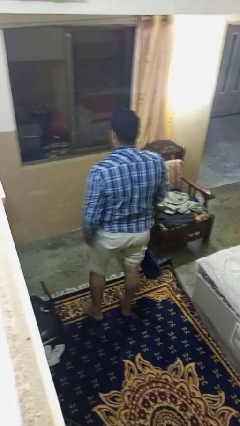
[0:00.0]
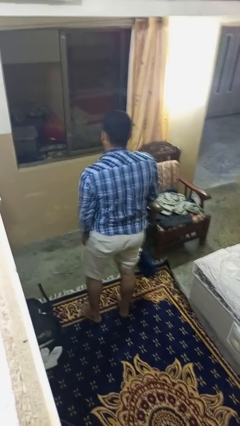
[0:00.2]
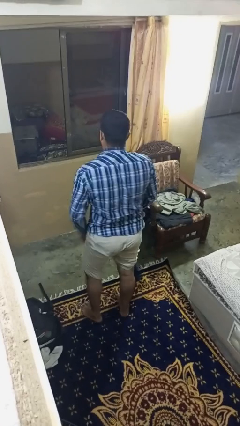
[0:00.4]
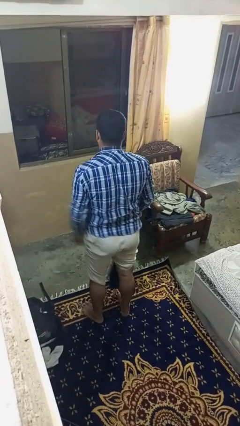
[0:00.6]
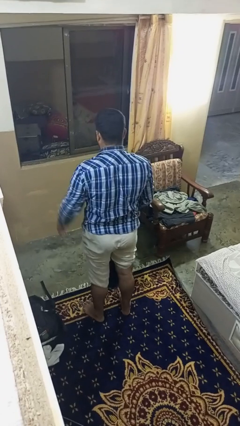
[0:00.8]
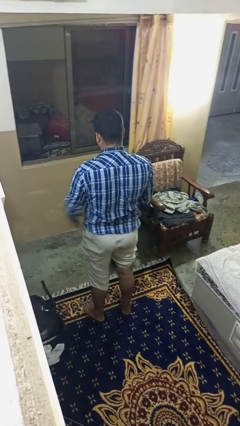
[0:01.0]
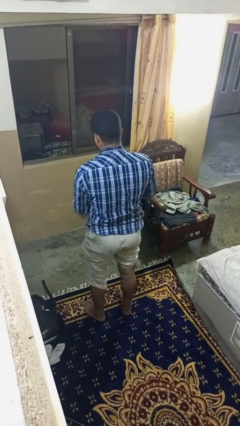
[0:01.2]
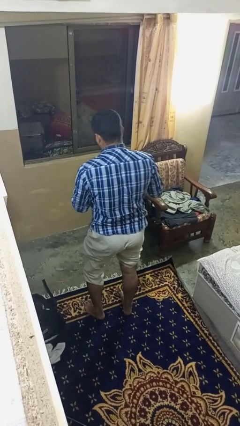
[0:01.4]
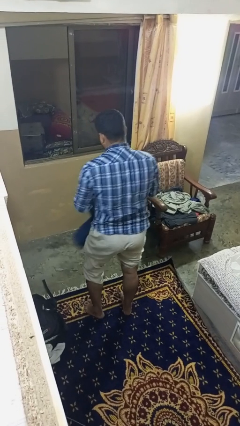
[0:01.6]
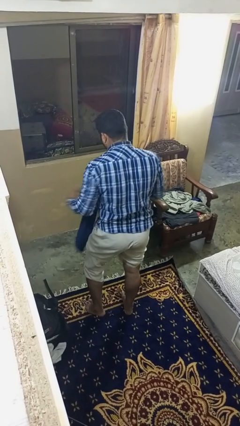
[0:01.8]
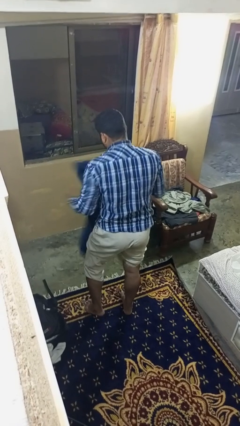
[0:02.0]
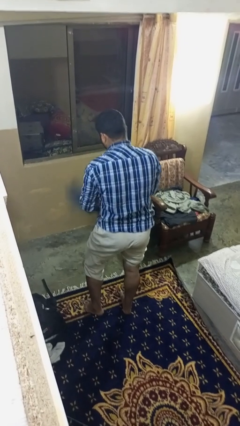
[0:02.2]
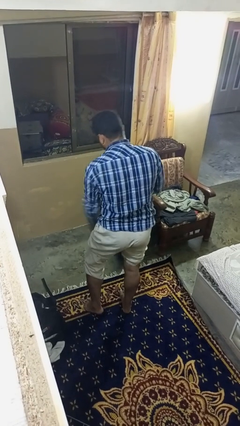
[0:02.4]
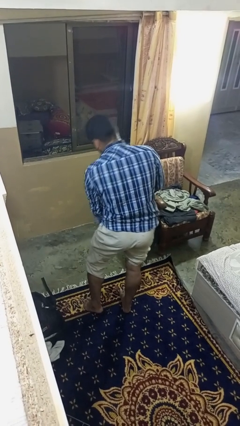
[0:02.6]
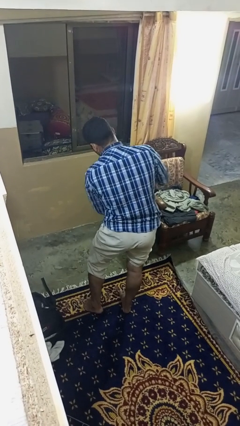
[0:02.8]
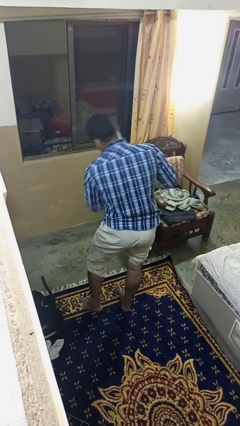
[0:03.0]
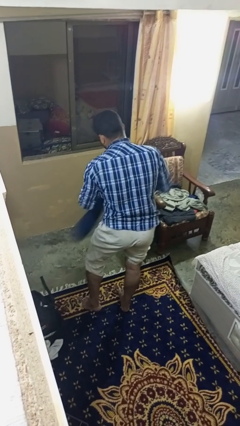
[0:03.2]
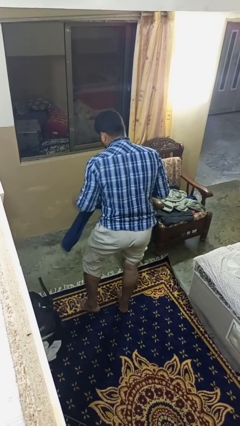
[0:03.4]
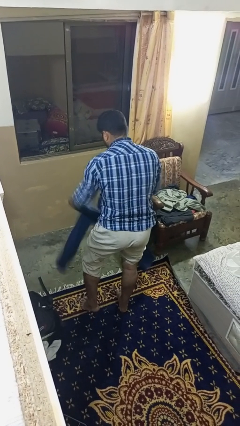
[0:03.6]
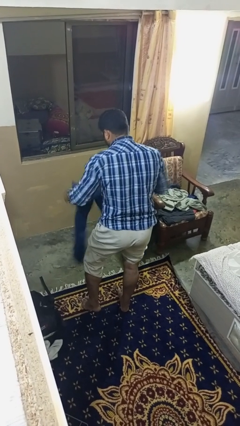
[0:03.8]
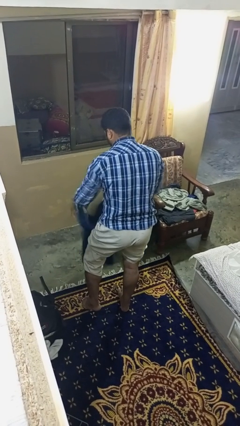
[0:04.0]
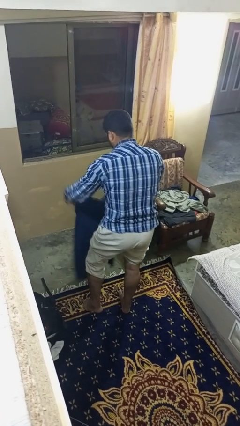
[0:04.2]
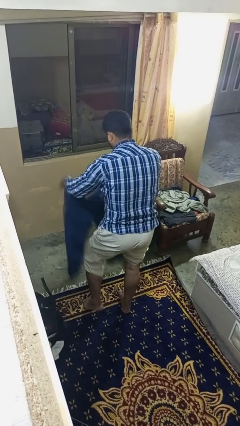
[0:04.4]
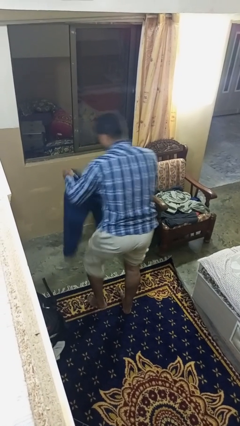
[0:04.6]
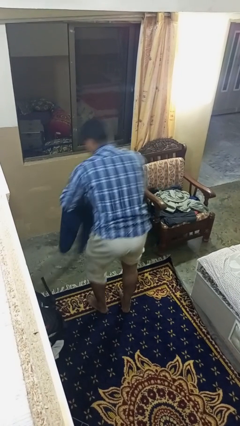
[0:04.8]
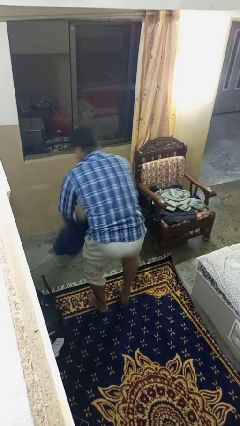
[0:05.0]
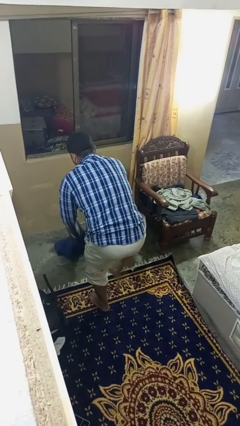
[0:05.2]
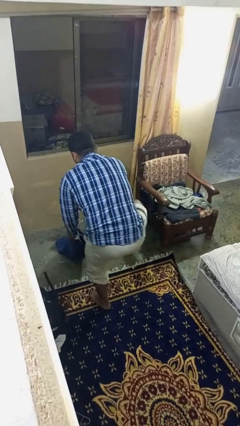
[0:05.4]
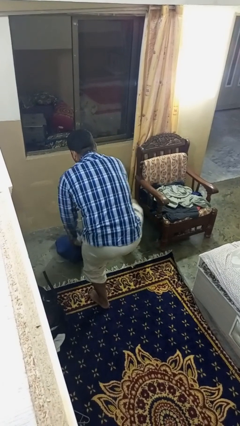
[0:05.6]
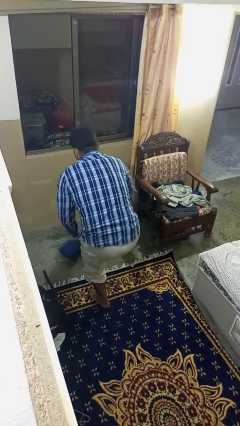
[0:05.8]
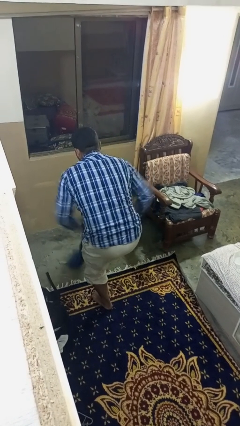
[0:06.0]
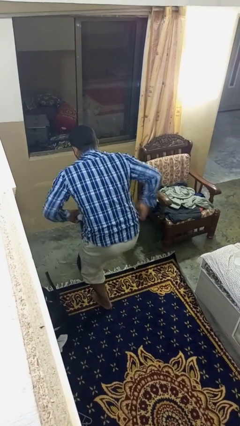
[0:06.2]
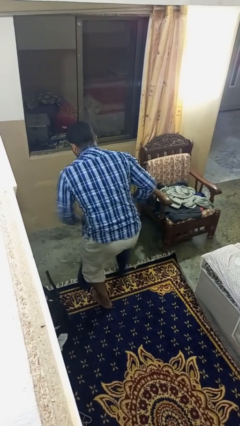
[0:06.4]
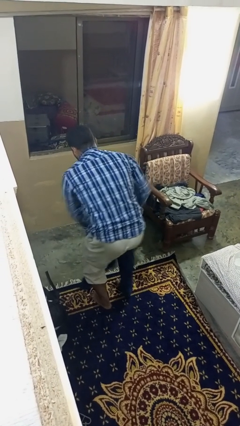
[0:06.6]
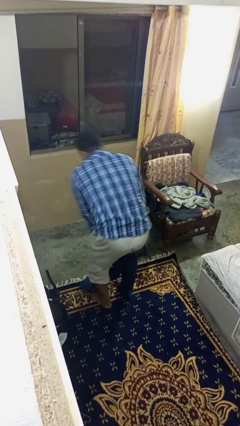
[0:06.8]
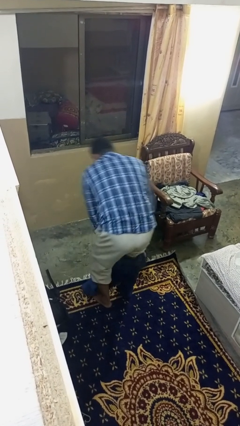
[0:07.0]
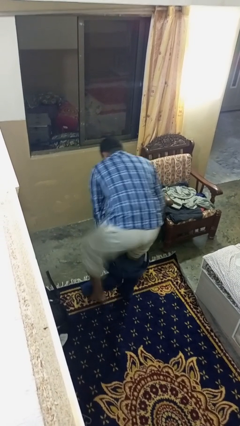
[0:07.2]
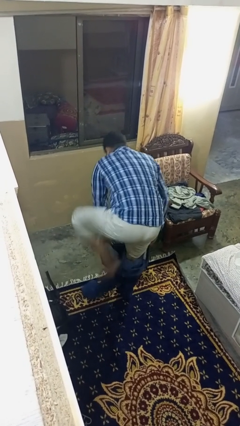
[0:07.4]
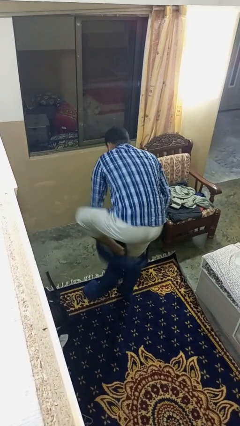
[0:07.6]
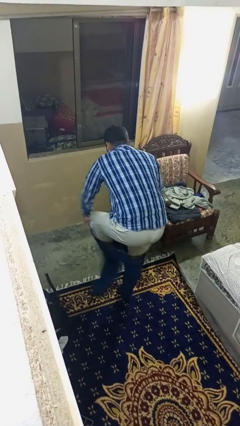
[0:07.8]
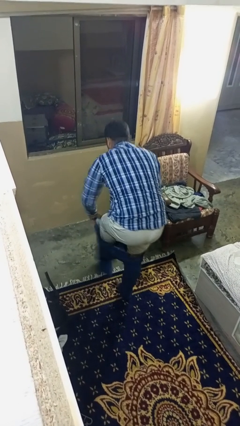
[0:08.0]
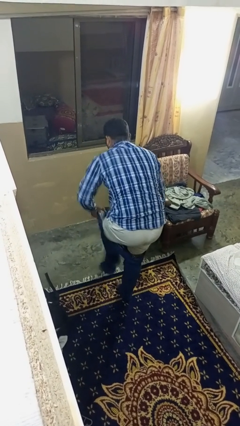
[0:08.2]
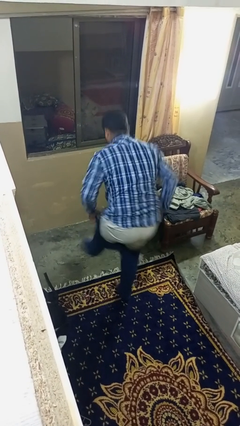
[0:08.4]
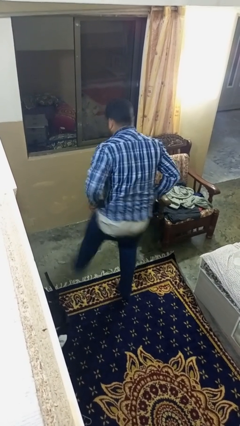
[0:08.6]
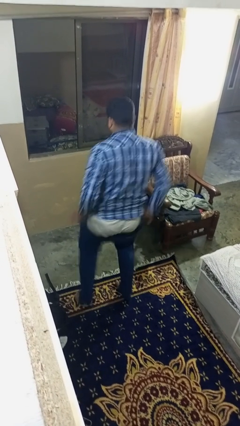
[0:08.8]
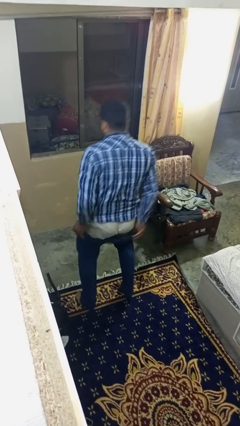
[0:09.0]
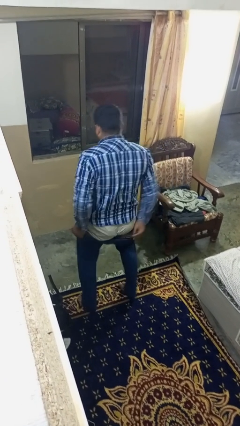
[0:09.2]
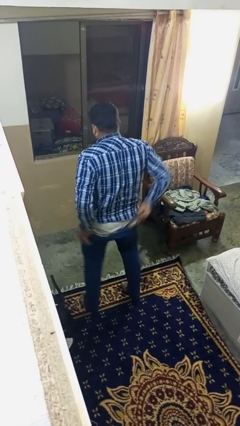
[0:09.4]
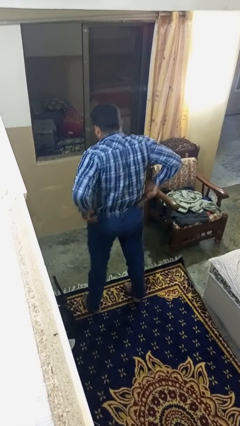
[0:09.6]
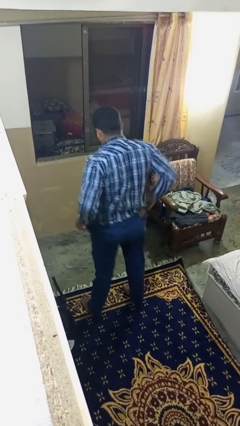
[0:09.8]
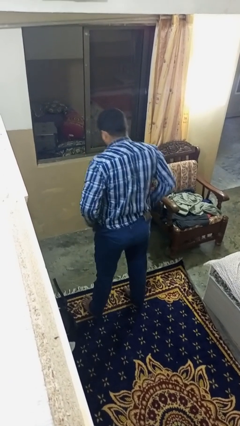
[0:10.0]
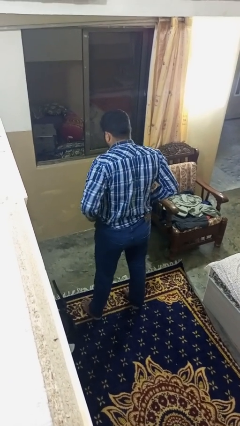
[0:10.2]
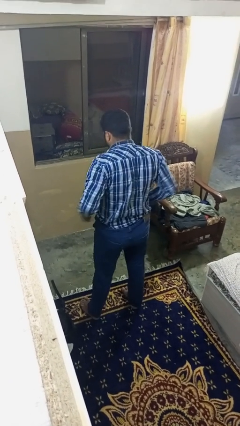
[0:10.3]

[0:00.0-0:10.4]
person puts on pants

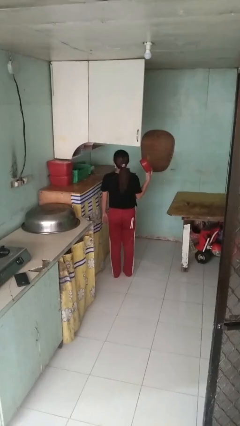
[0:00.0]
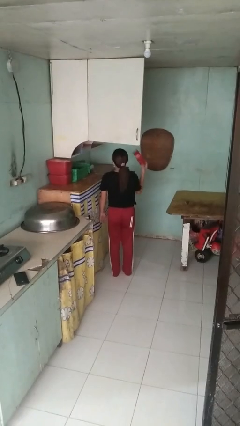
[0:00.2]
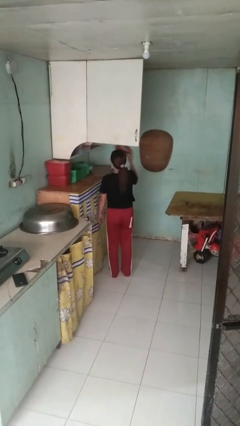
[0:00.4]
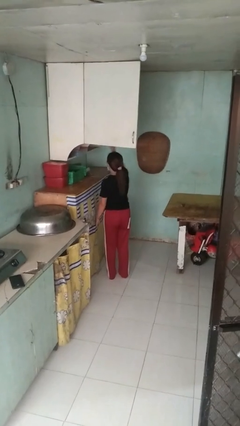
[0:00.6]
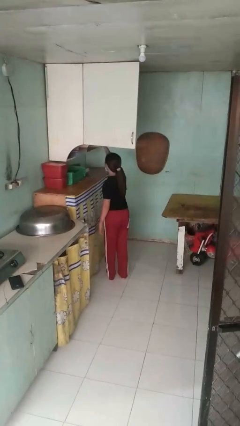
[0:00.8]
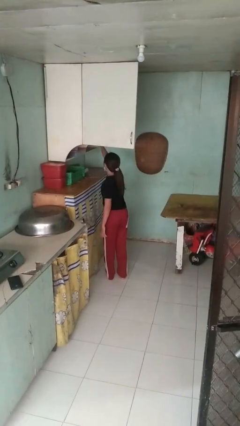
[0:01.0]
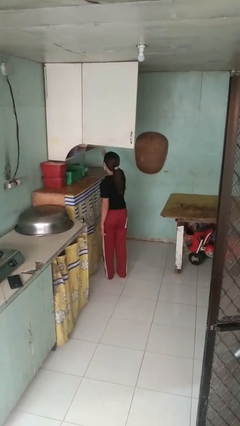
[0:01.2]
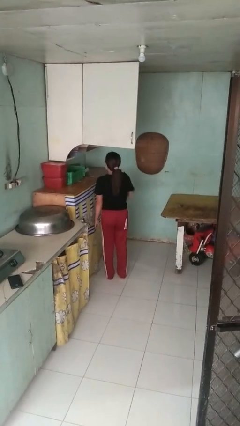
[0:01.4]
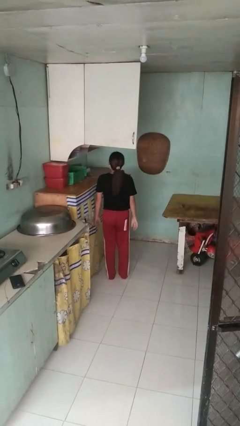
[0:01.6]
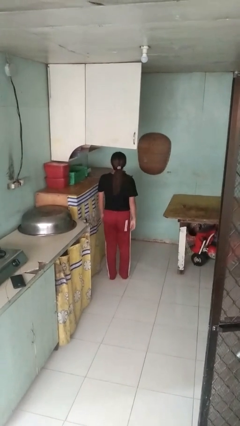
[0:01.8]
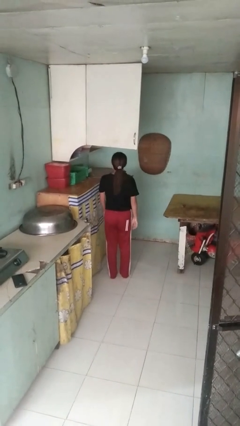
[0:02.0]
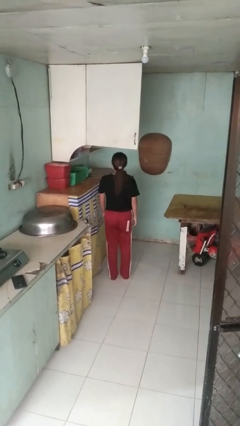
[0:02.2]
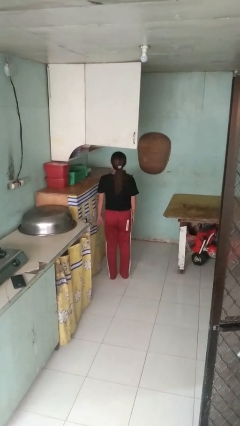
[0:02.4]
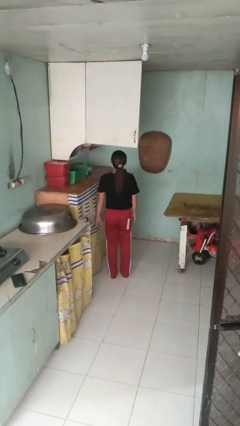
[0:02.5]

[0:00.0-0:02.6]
person puts object in cabinet

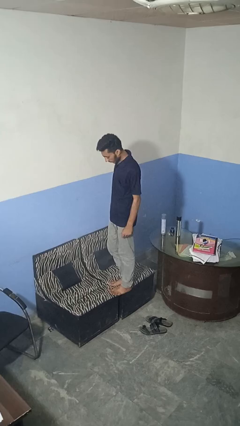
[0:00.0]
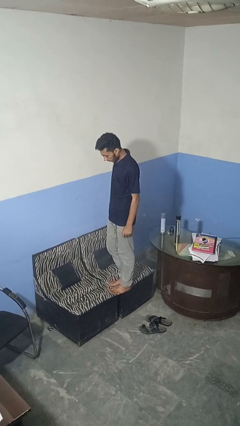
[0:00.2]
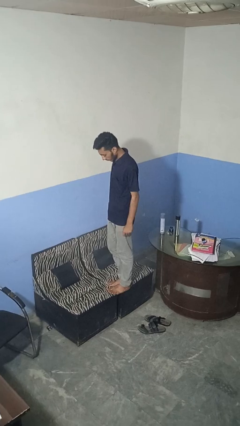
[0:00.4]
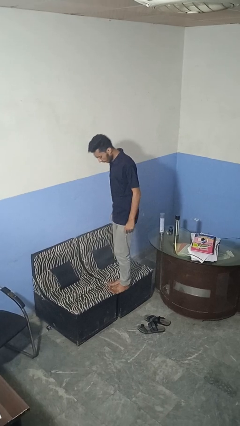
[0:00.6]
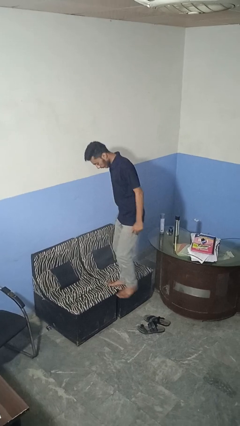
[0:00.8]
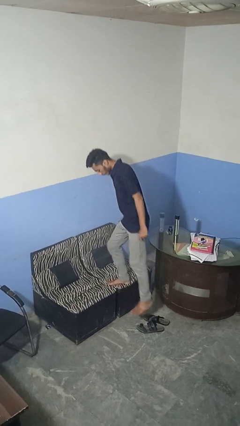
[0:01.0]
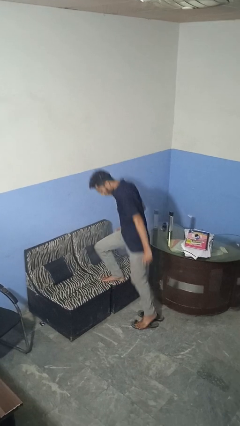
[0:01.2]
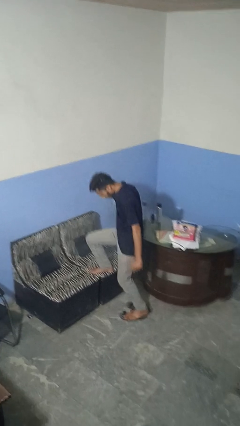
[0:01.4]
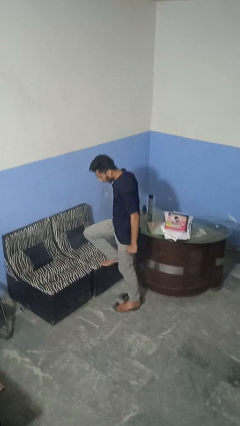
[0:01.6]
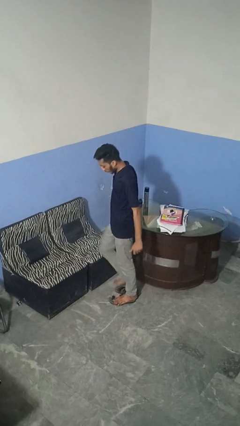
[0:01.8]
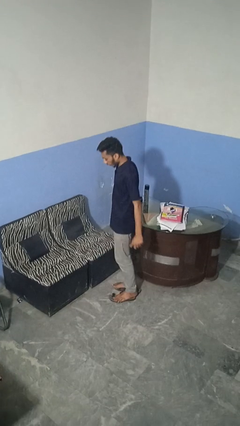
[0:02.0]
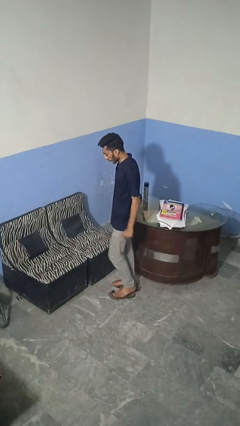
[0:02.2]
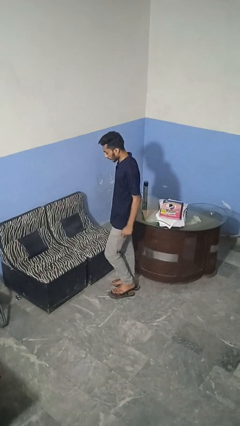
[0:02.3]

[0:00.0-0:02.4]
person climbs off couch

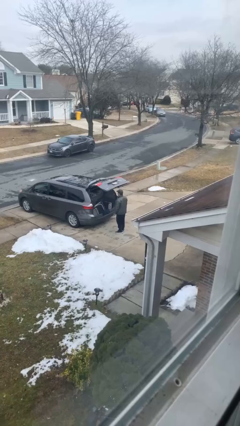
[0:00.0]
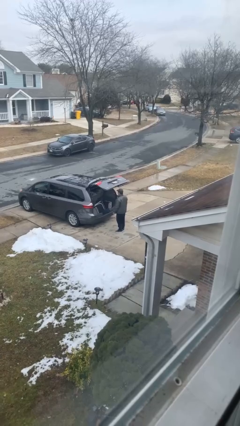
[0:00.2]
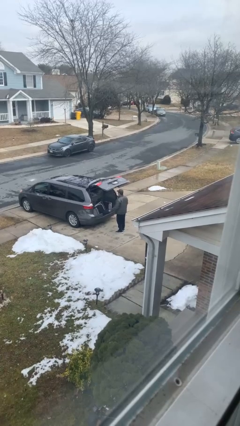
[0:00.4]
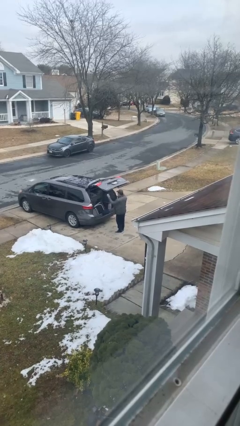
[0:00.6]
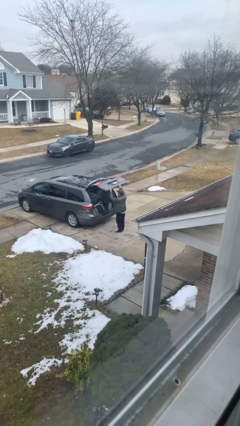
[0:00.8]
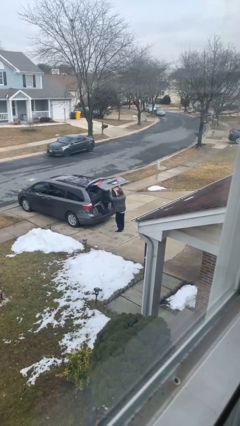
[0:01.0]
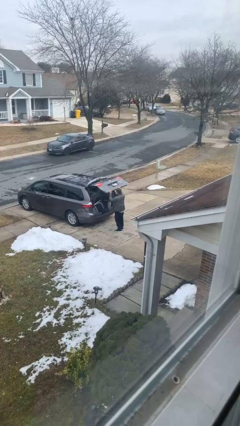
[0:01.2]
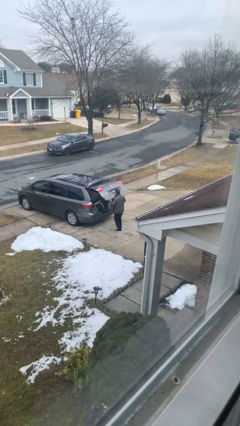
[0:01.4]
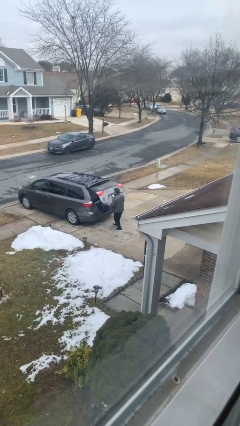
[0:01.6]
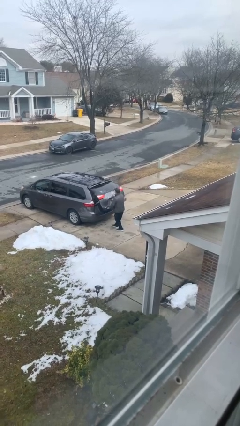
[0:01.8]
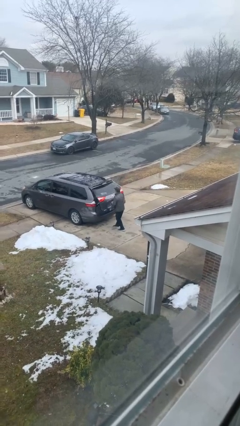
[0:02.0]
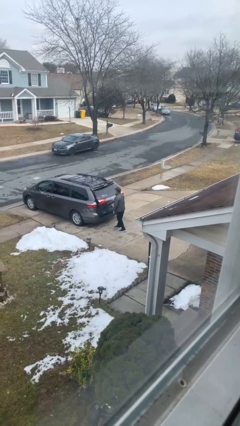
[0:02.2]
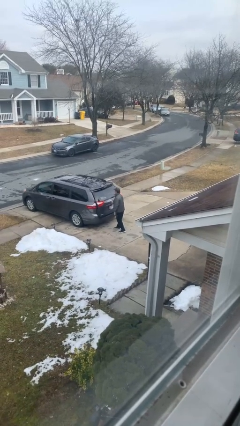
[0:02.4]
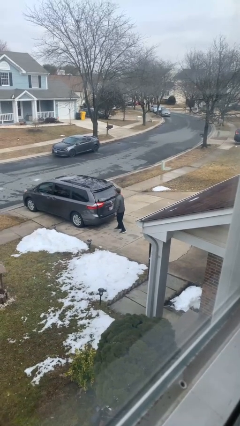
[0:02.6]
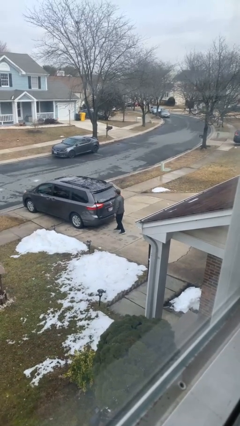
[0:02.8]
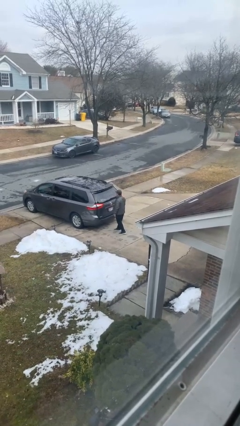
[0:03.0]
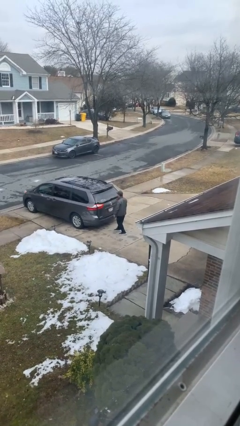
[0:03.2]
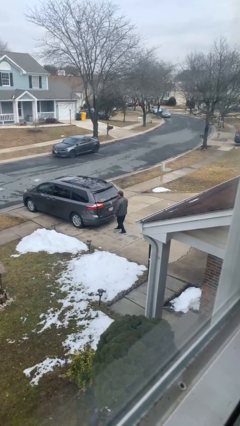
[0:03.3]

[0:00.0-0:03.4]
person closes car trunk
